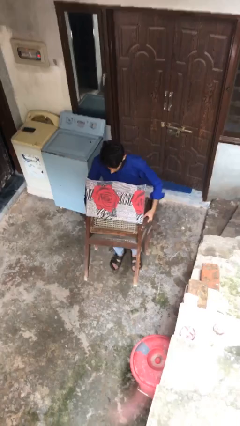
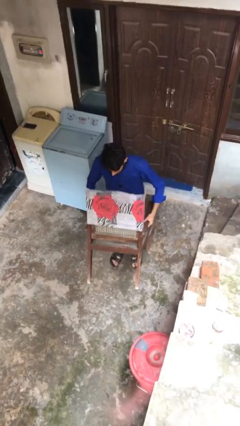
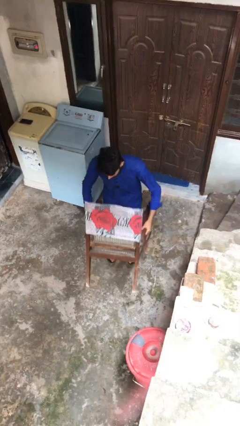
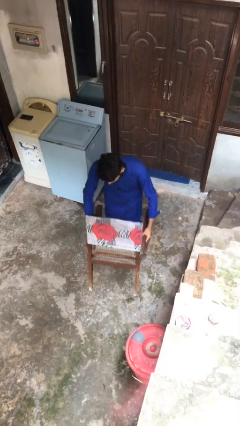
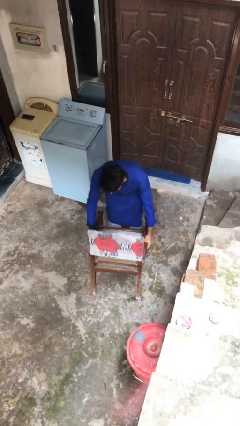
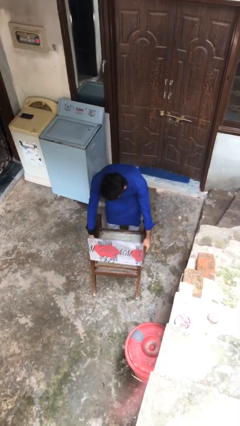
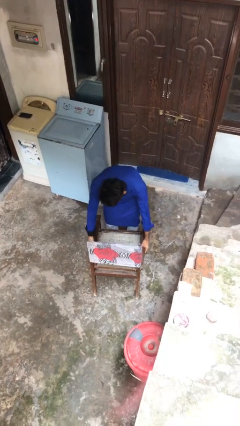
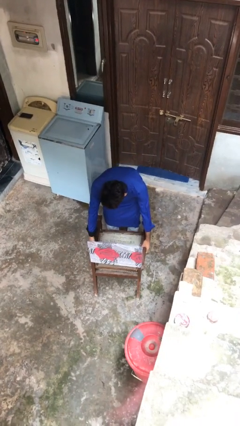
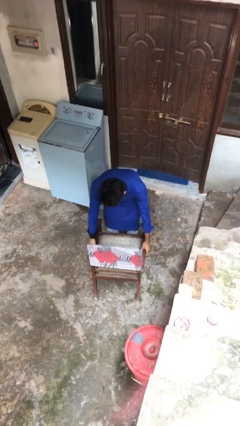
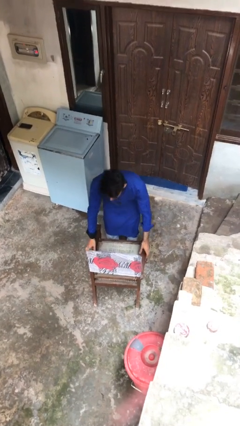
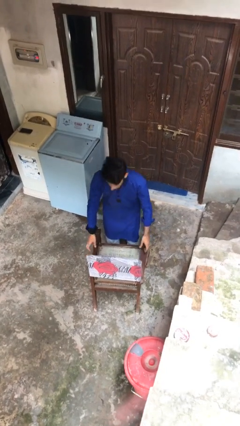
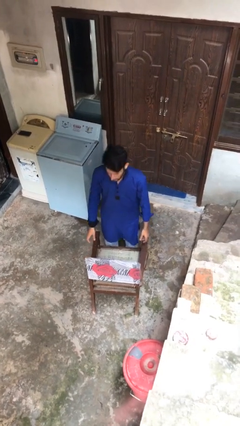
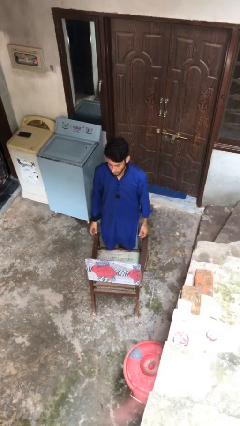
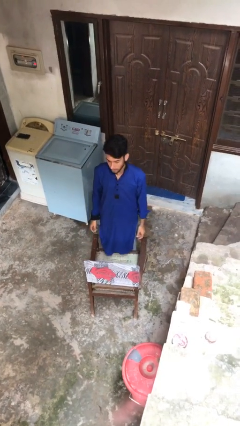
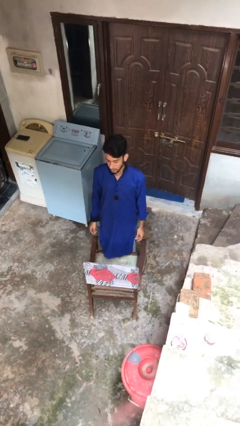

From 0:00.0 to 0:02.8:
person puts down object on floor

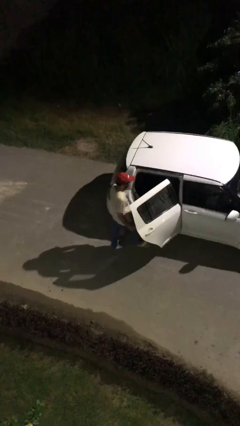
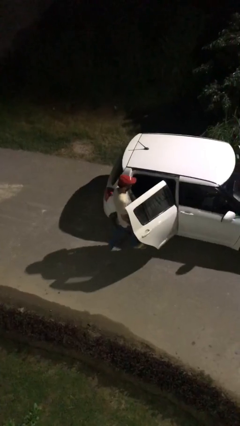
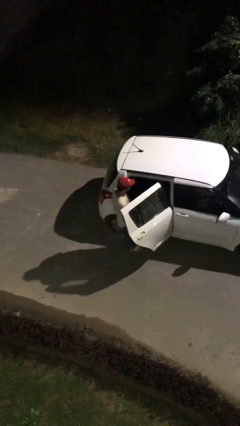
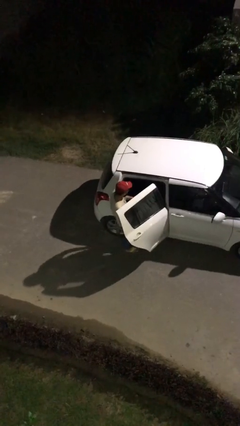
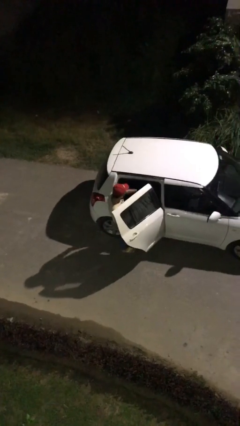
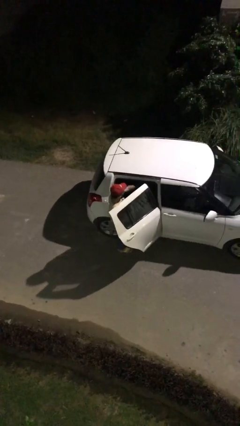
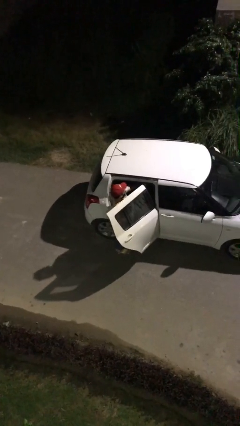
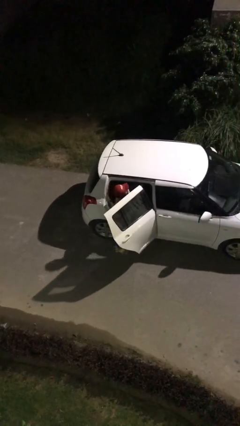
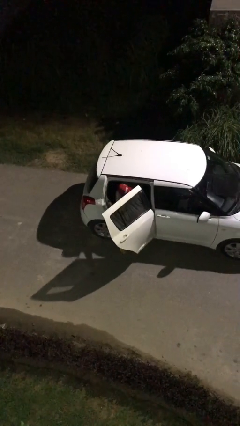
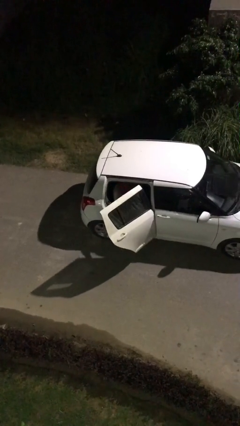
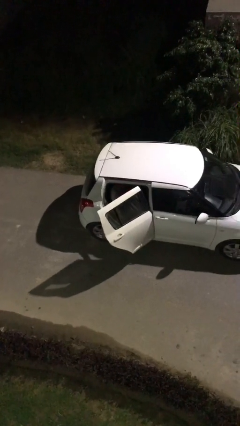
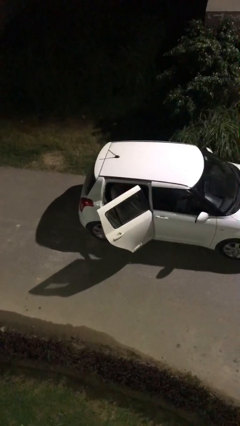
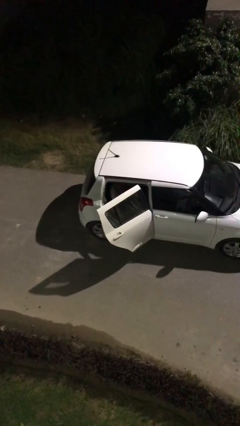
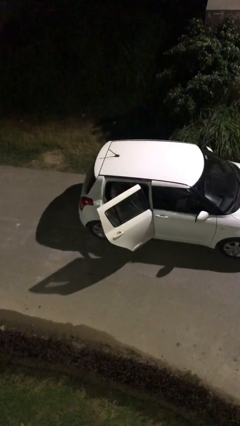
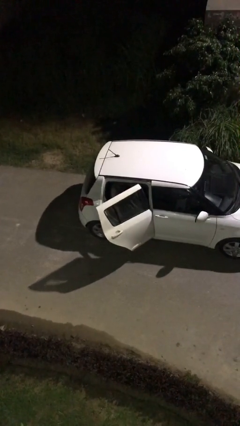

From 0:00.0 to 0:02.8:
person enters car

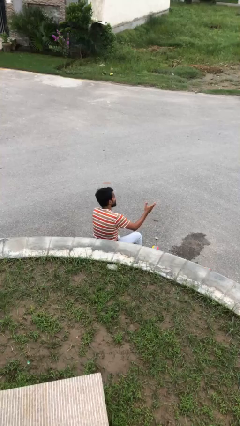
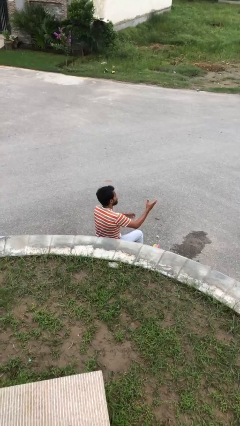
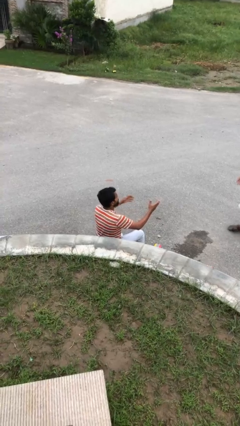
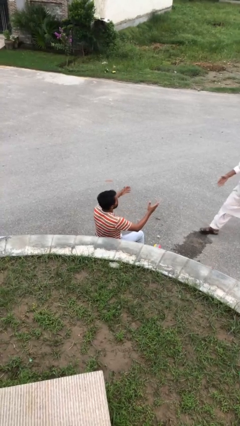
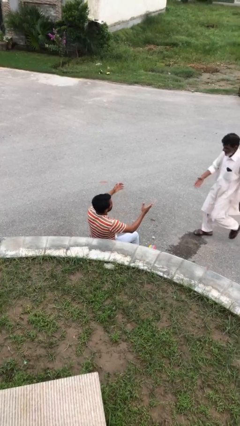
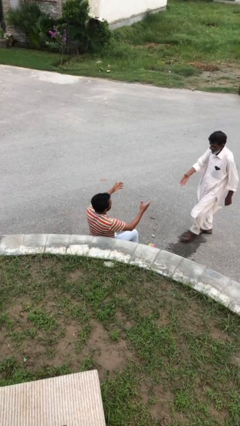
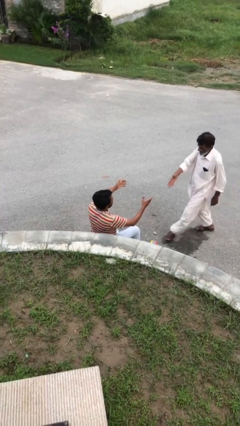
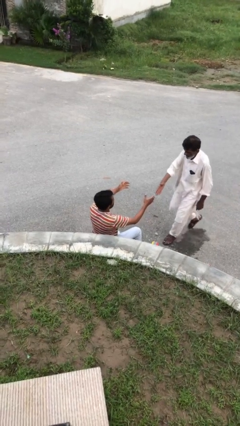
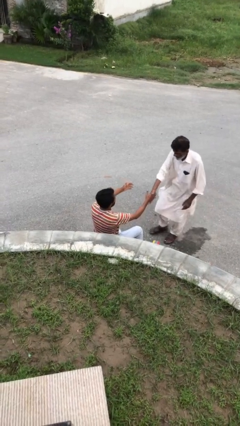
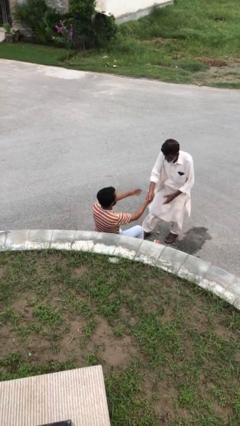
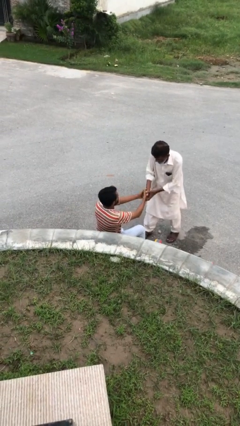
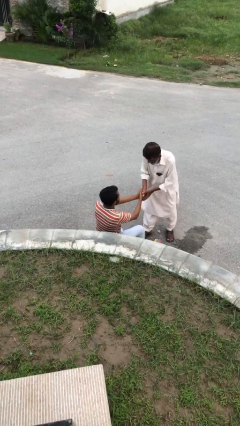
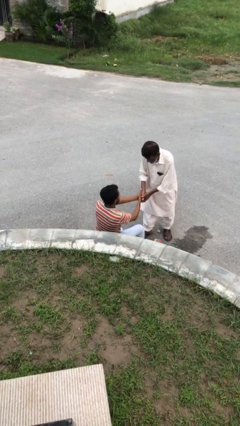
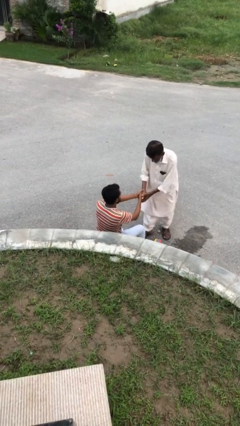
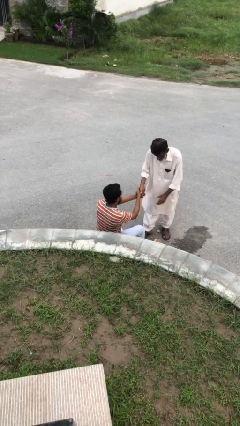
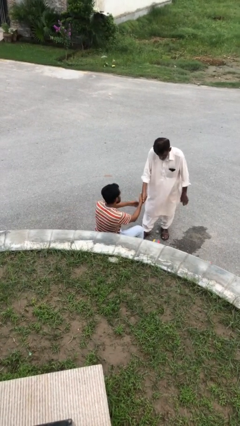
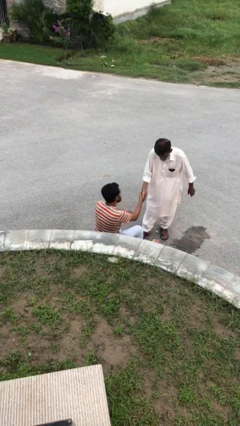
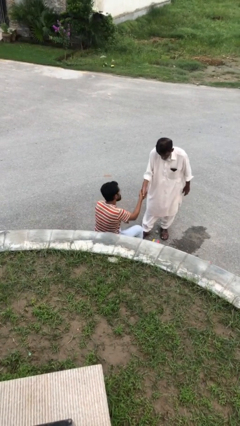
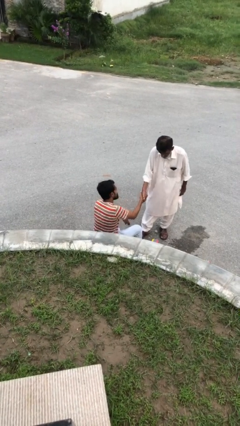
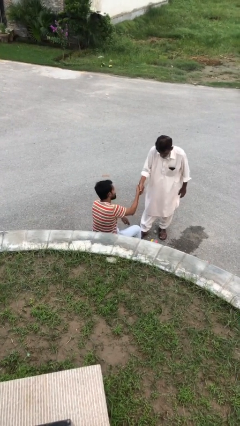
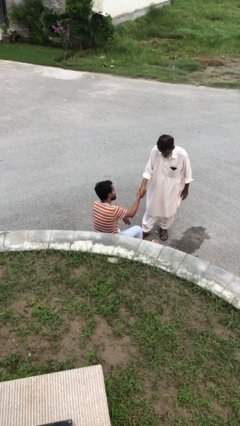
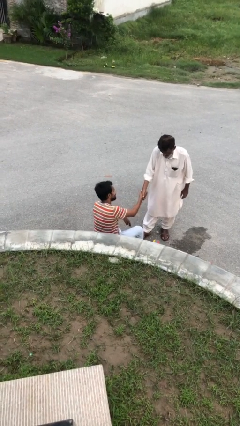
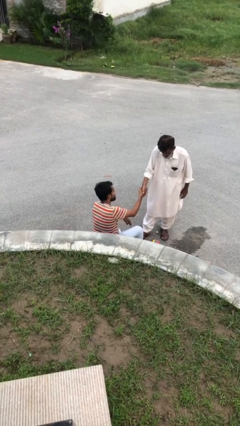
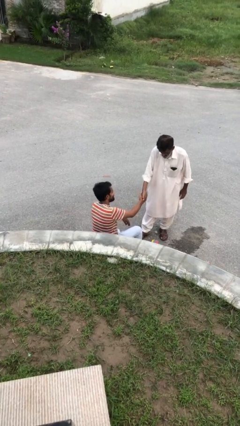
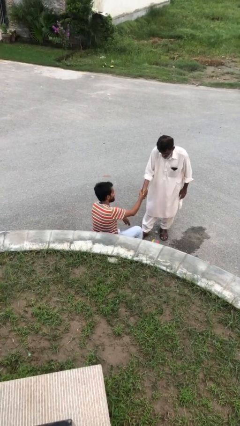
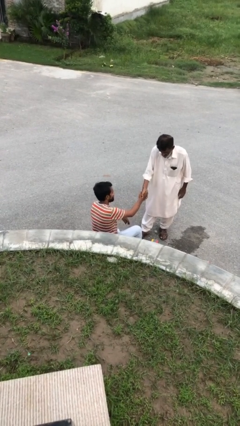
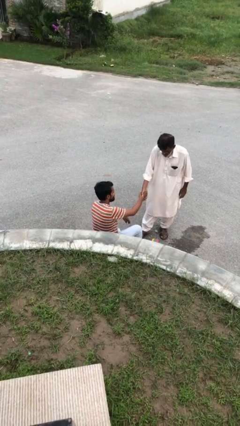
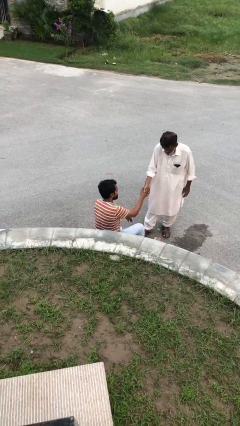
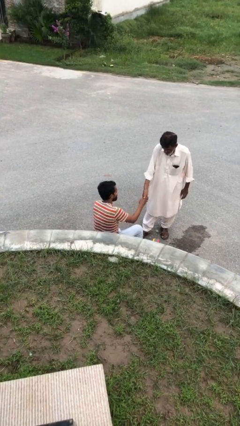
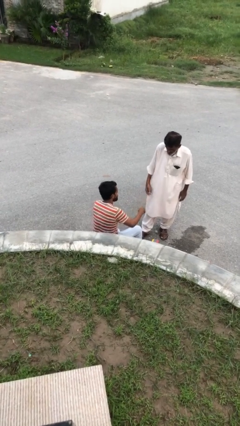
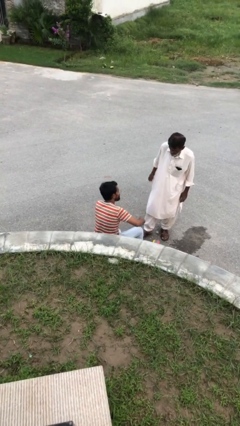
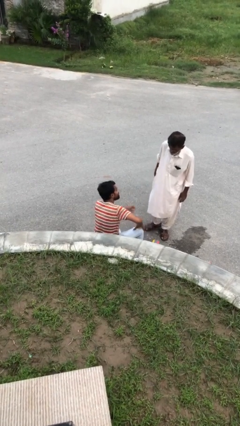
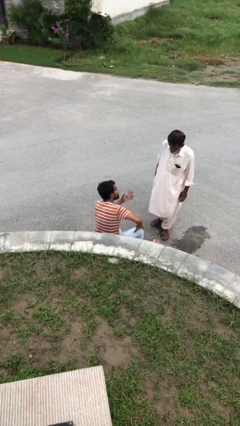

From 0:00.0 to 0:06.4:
person shakes hand

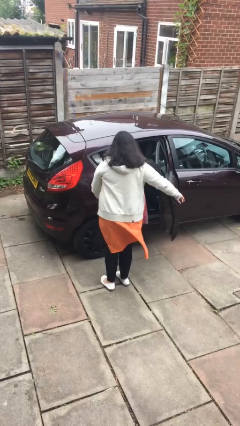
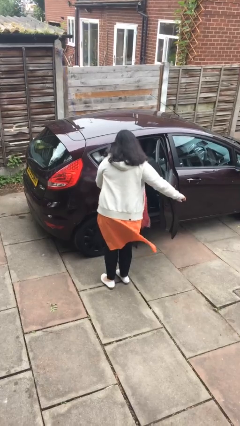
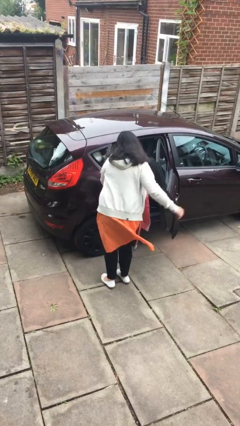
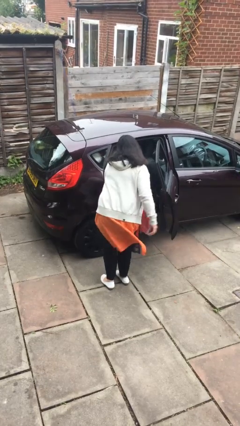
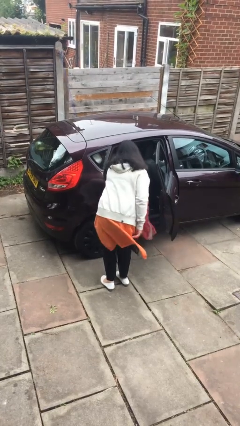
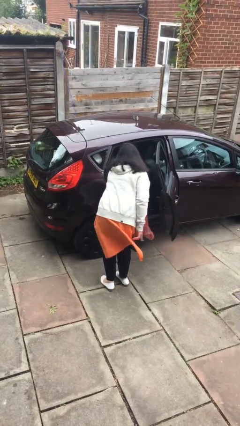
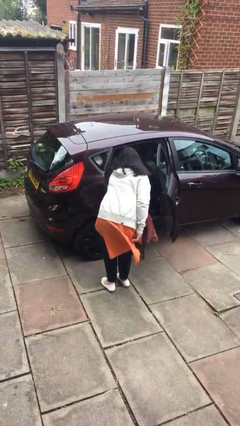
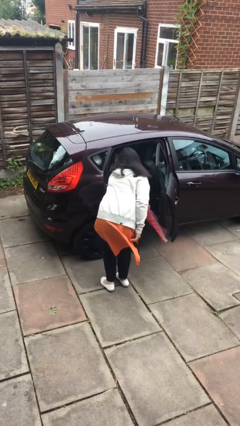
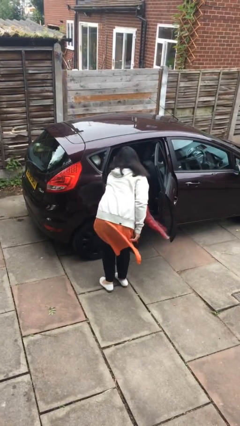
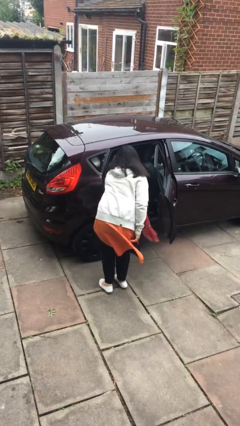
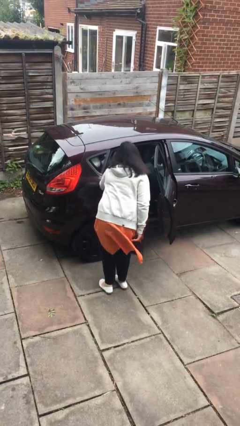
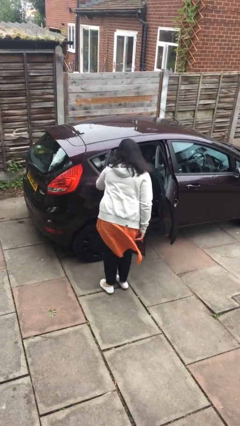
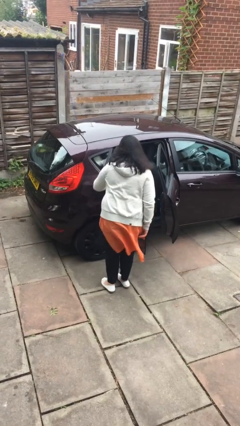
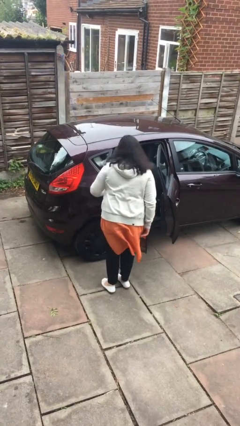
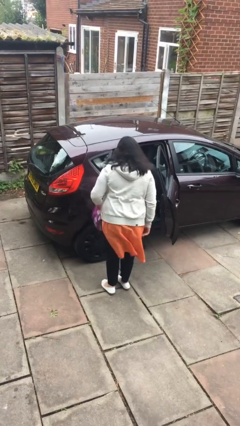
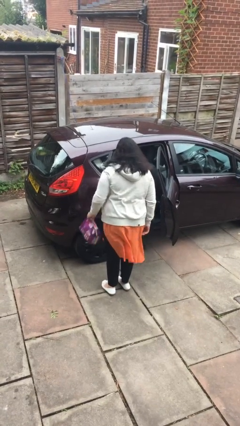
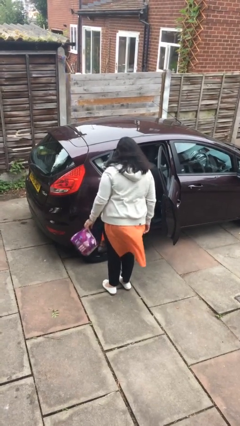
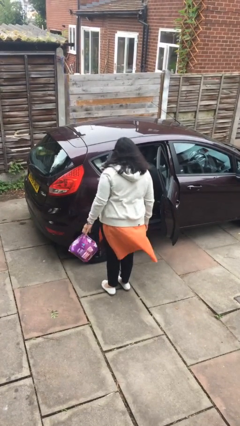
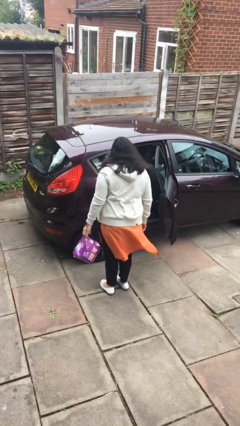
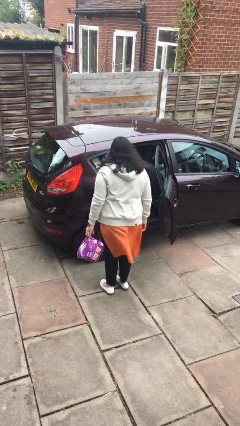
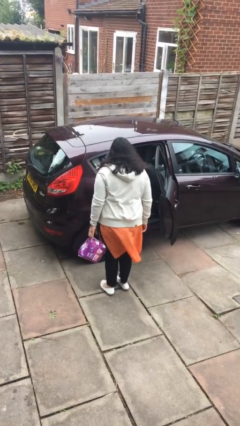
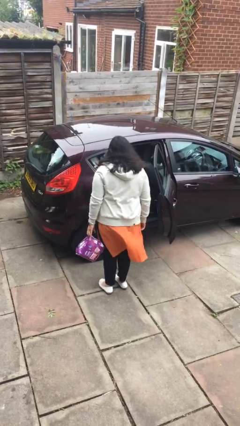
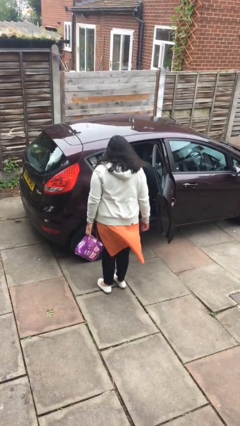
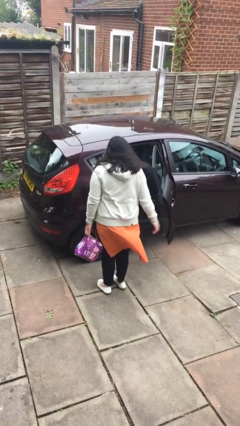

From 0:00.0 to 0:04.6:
person unloads car

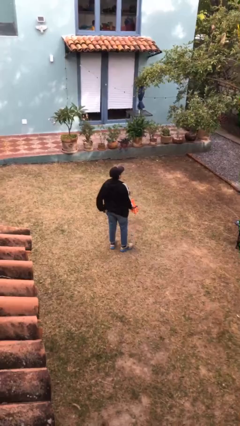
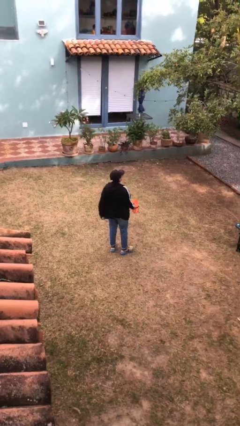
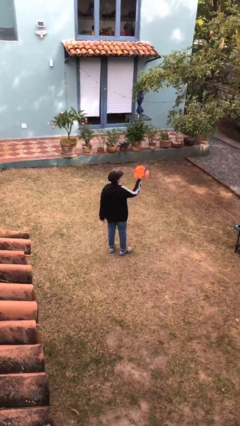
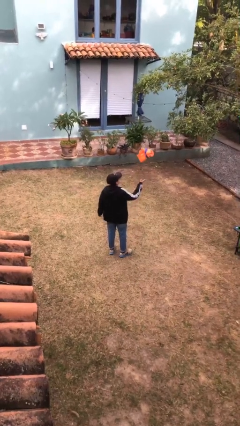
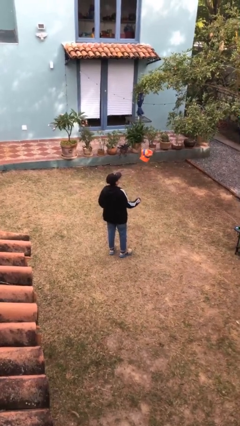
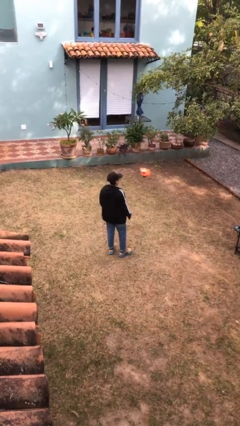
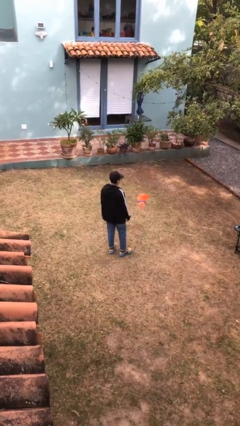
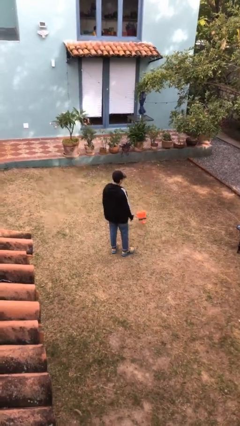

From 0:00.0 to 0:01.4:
person throws object into air
